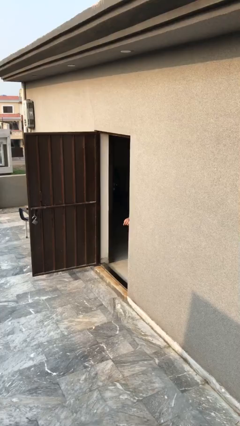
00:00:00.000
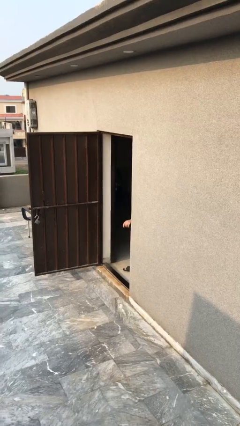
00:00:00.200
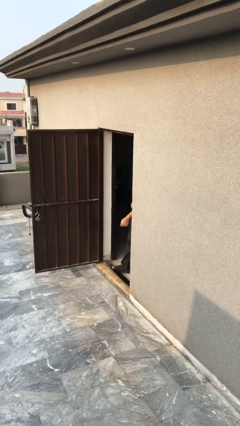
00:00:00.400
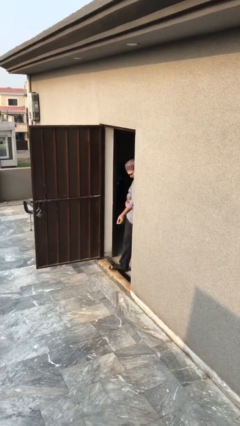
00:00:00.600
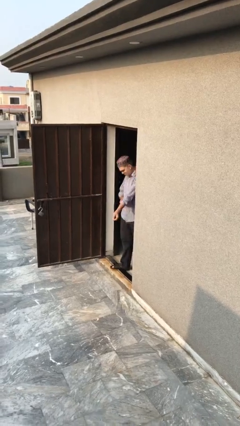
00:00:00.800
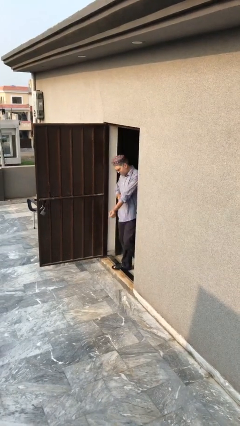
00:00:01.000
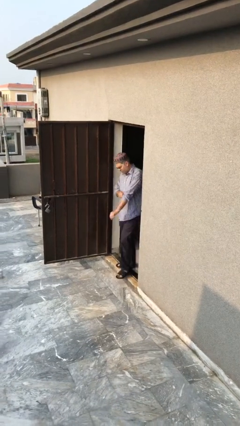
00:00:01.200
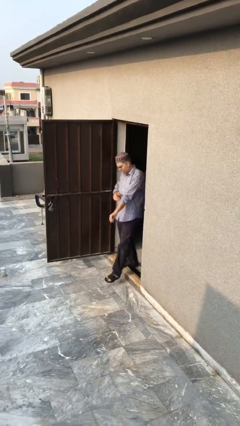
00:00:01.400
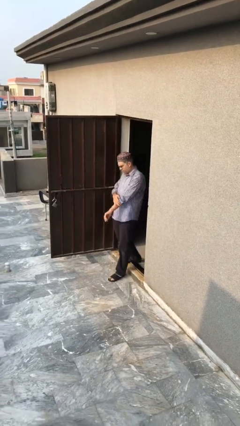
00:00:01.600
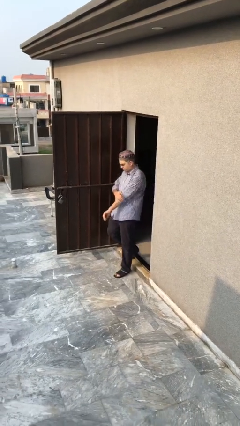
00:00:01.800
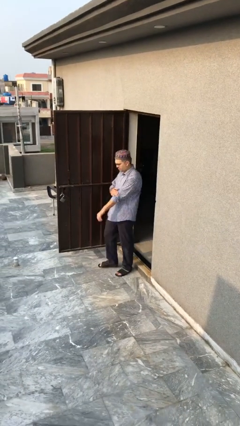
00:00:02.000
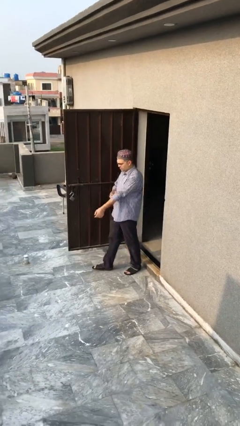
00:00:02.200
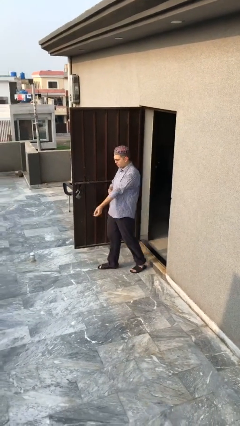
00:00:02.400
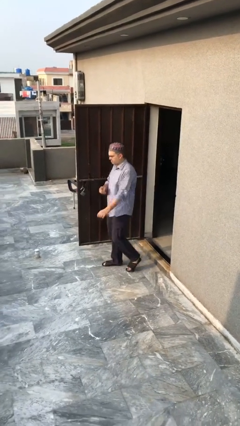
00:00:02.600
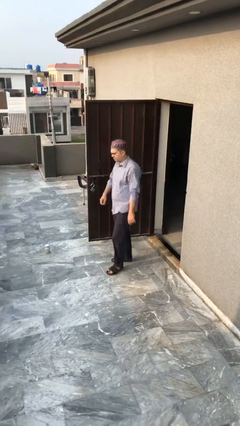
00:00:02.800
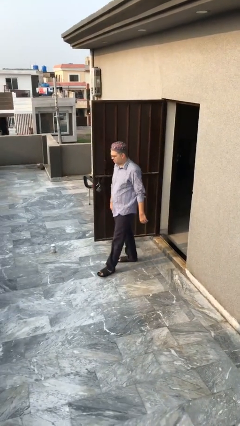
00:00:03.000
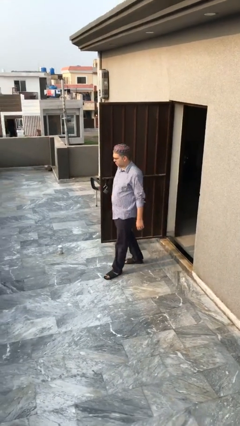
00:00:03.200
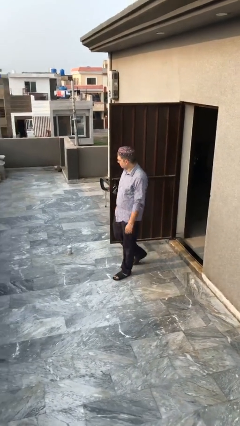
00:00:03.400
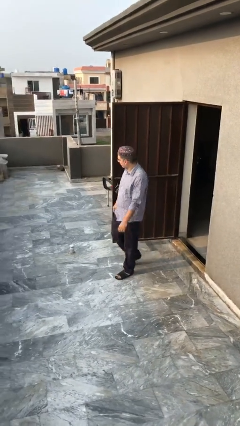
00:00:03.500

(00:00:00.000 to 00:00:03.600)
person enters scene through structure

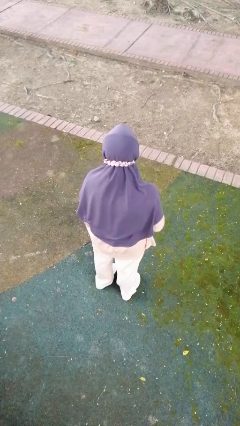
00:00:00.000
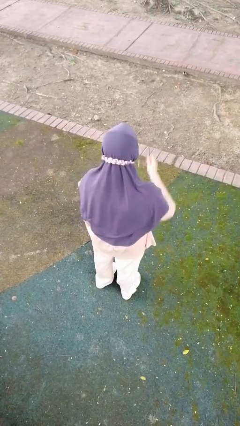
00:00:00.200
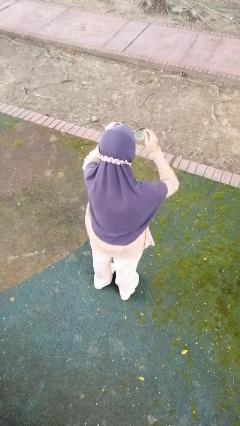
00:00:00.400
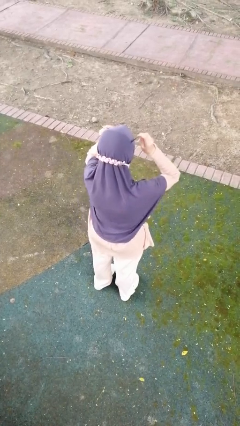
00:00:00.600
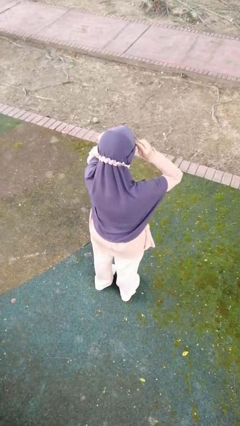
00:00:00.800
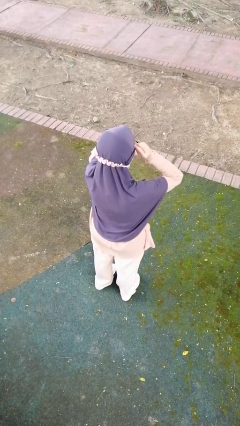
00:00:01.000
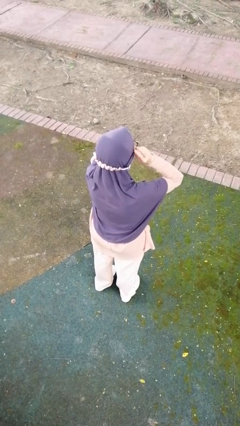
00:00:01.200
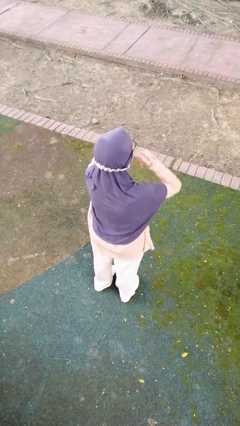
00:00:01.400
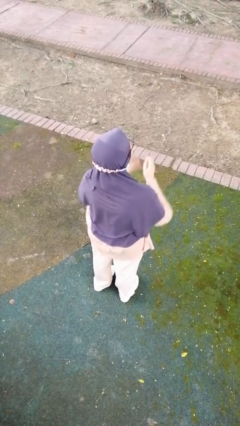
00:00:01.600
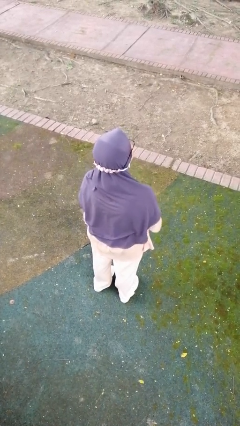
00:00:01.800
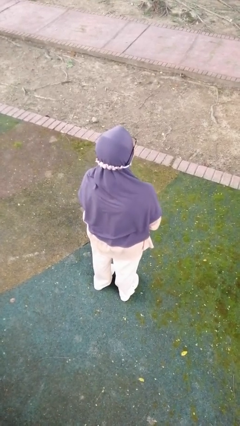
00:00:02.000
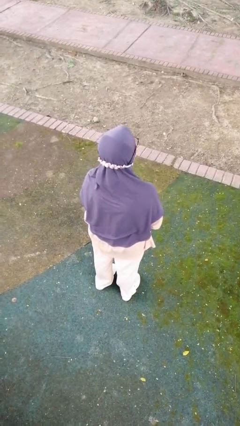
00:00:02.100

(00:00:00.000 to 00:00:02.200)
person puts on glasses

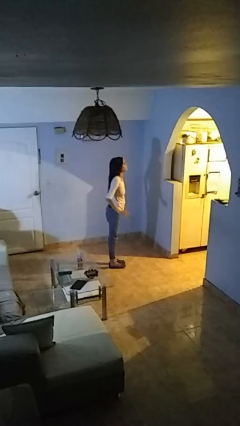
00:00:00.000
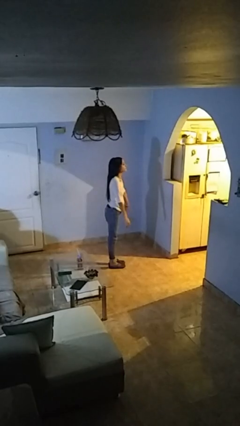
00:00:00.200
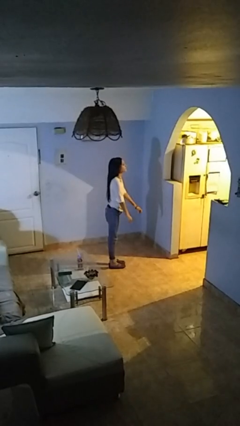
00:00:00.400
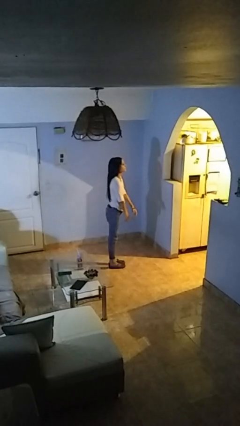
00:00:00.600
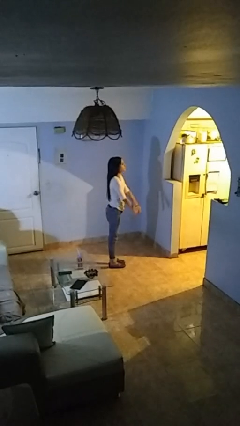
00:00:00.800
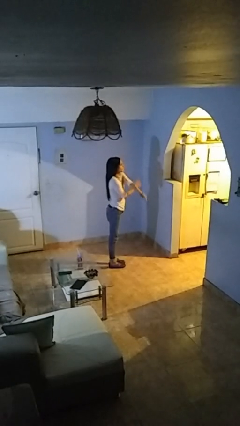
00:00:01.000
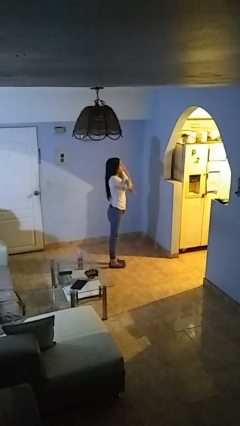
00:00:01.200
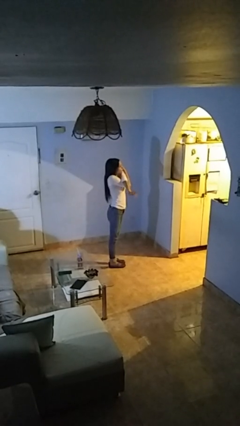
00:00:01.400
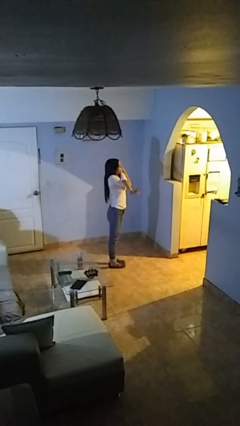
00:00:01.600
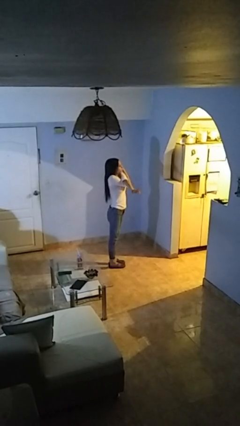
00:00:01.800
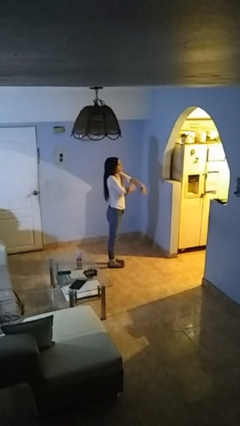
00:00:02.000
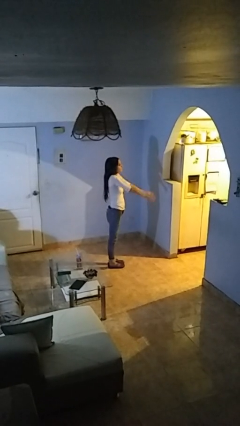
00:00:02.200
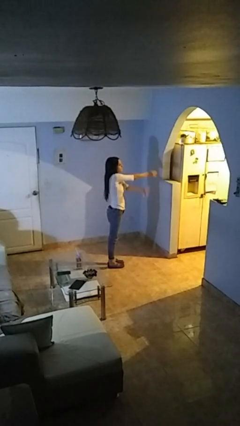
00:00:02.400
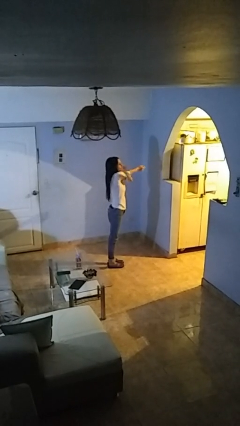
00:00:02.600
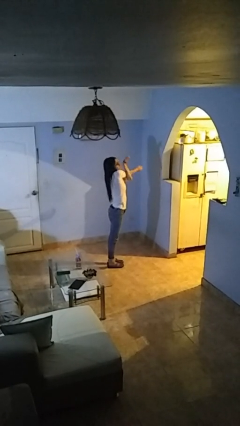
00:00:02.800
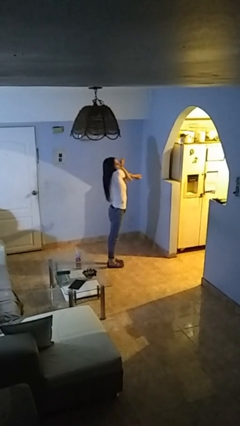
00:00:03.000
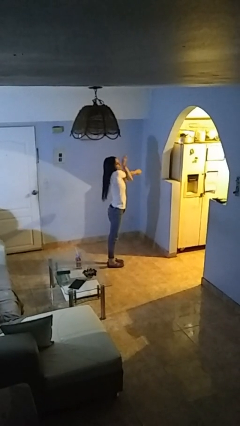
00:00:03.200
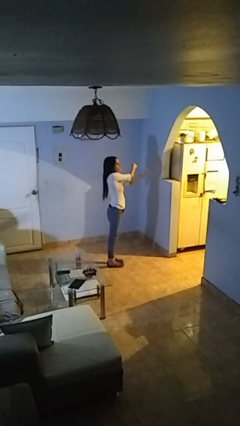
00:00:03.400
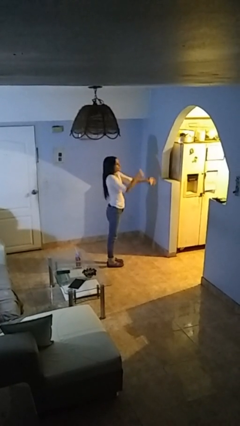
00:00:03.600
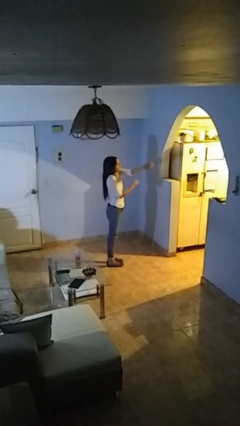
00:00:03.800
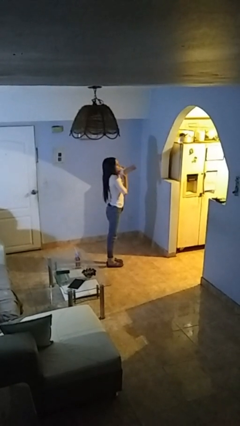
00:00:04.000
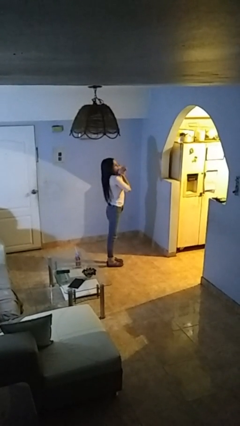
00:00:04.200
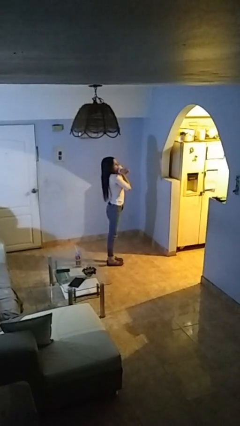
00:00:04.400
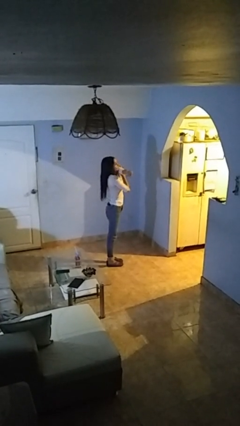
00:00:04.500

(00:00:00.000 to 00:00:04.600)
person stretches arms to side

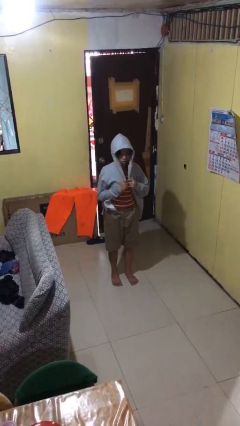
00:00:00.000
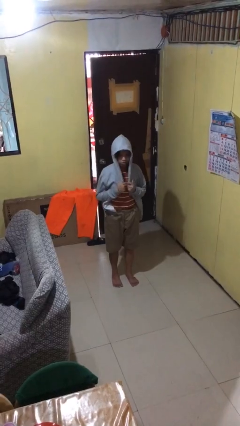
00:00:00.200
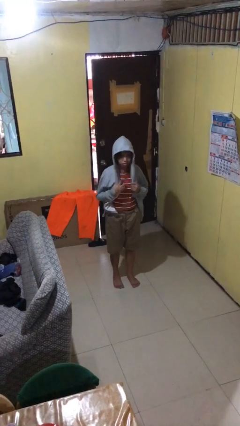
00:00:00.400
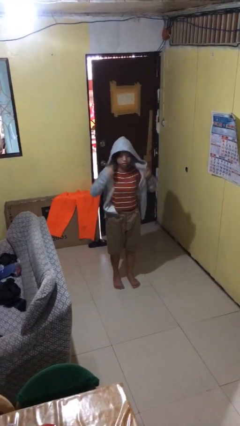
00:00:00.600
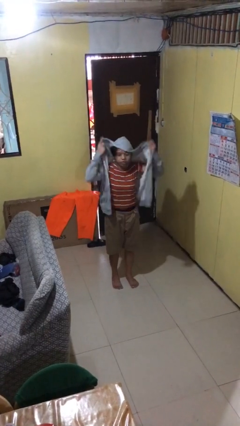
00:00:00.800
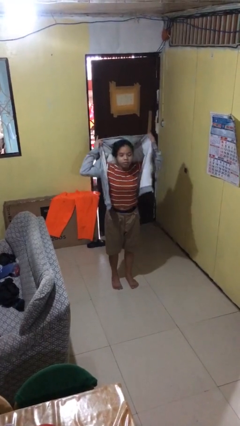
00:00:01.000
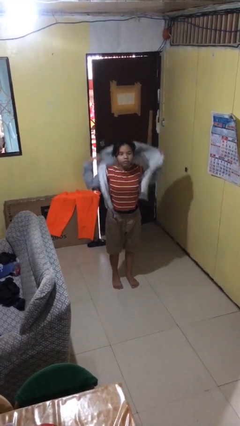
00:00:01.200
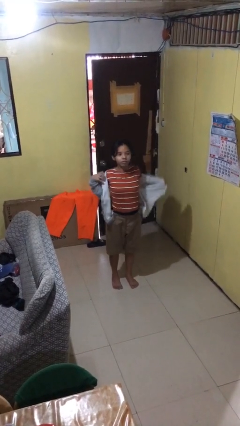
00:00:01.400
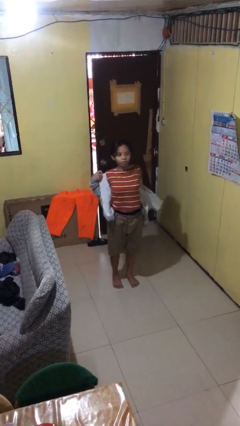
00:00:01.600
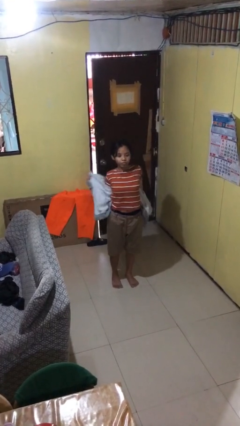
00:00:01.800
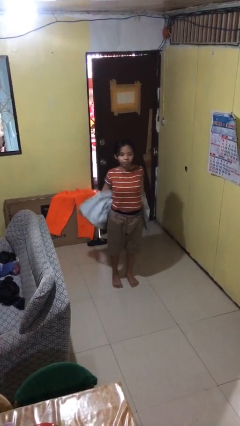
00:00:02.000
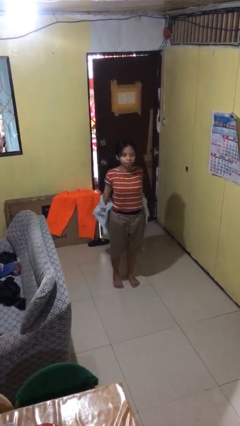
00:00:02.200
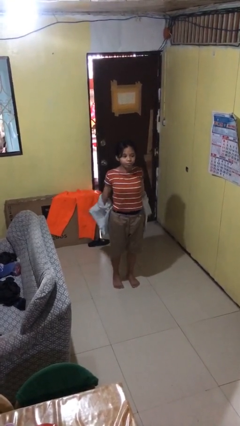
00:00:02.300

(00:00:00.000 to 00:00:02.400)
person takes off hoodie

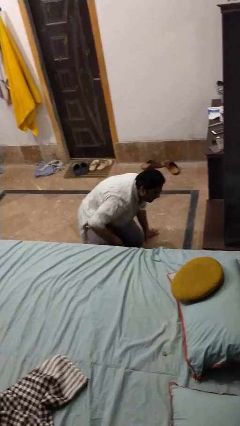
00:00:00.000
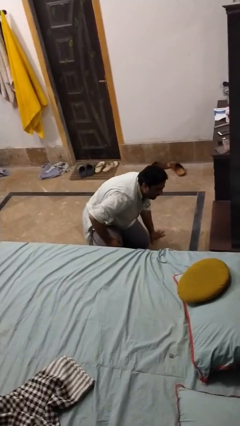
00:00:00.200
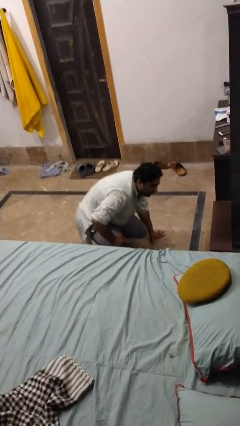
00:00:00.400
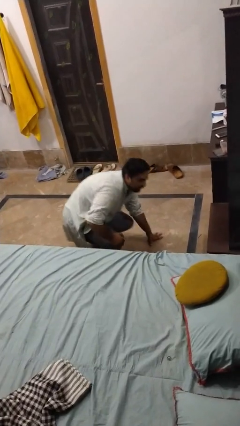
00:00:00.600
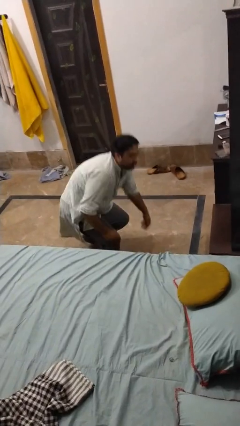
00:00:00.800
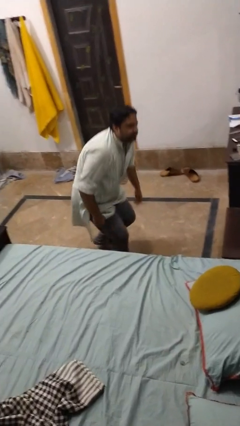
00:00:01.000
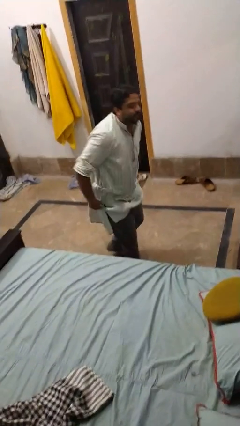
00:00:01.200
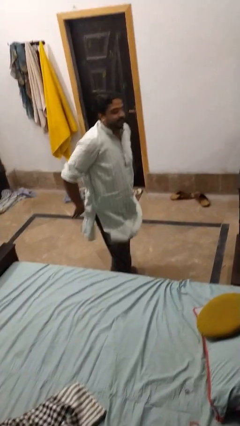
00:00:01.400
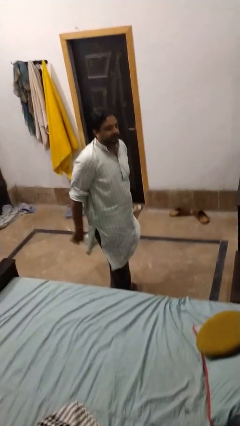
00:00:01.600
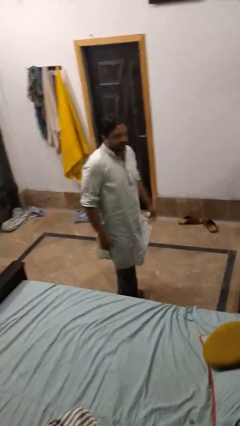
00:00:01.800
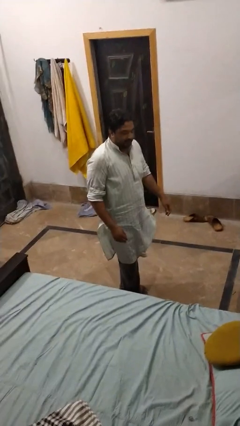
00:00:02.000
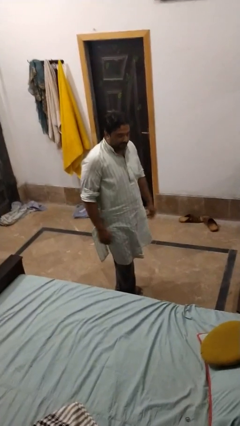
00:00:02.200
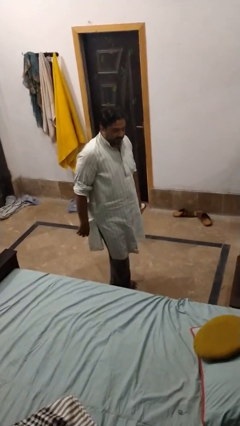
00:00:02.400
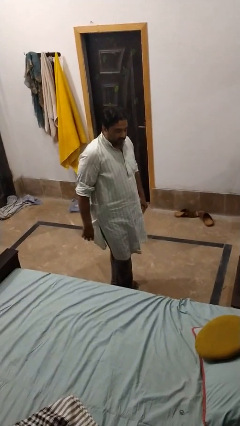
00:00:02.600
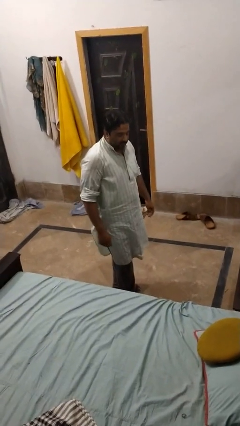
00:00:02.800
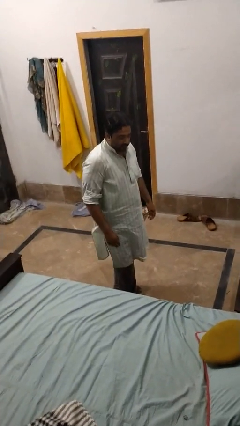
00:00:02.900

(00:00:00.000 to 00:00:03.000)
person stands up from floor

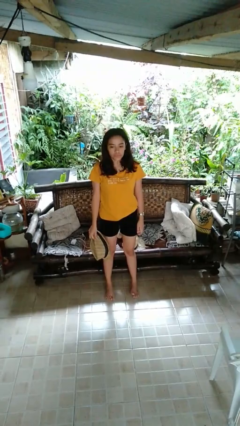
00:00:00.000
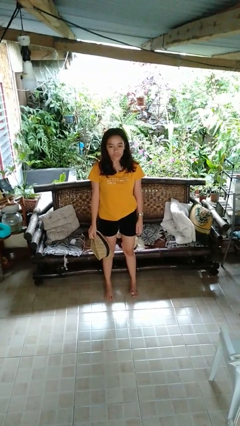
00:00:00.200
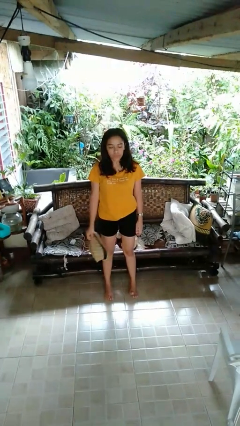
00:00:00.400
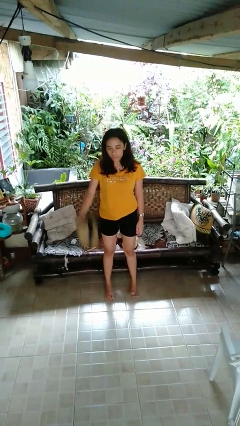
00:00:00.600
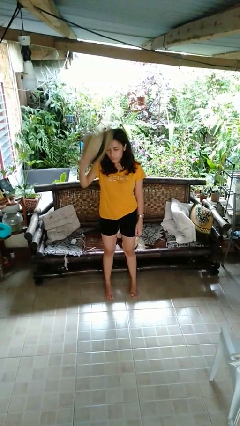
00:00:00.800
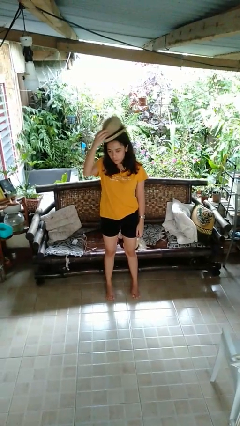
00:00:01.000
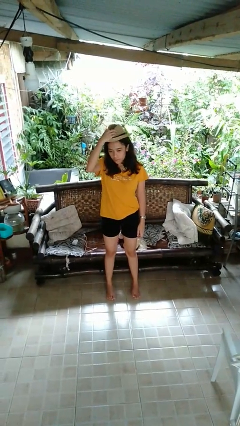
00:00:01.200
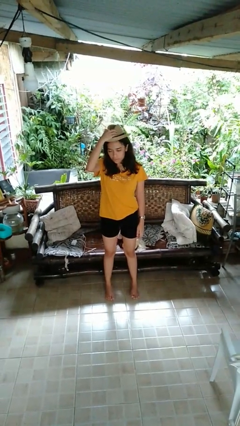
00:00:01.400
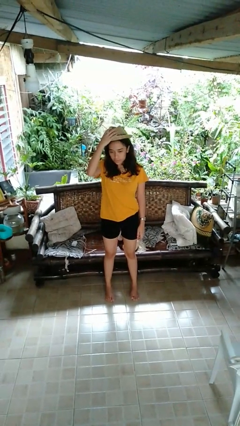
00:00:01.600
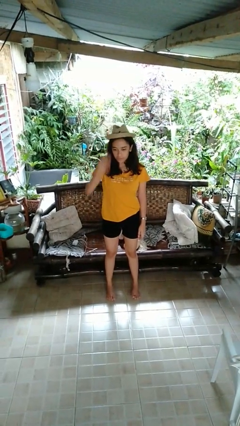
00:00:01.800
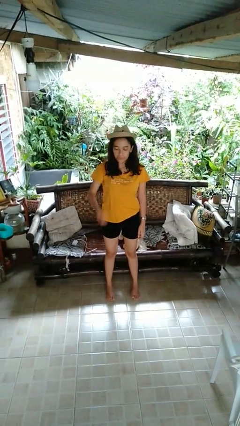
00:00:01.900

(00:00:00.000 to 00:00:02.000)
person puts on hat
